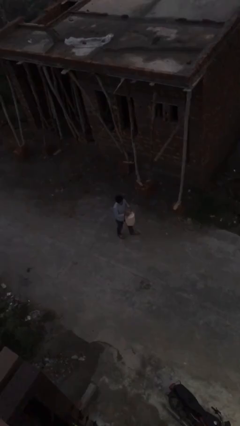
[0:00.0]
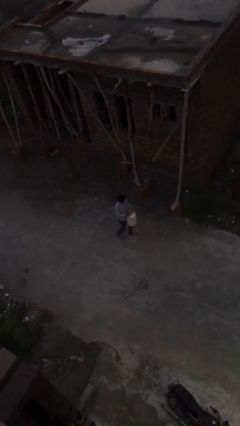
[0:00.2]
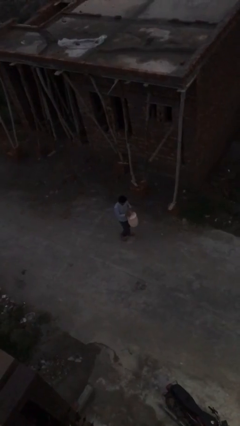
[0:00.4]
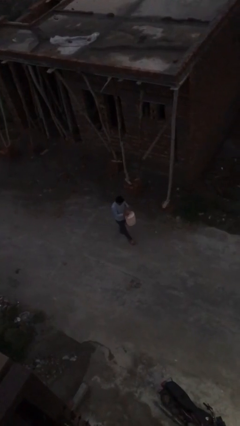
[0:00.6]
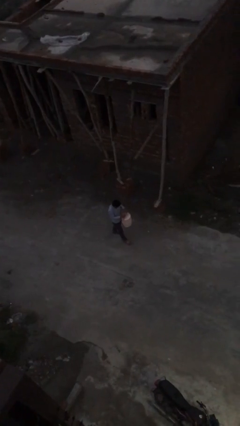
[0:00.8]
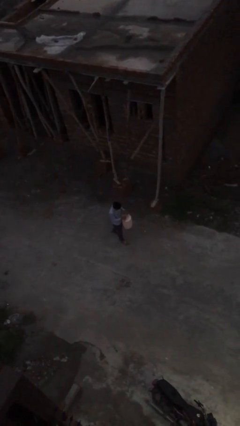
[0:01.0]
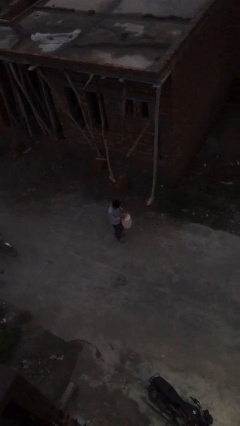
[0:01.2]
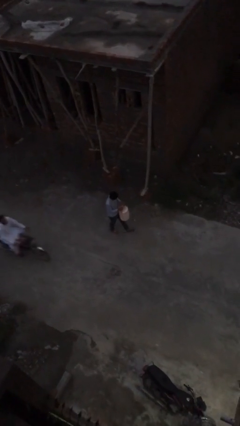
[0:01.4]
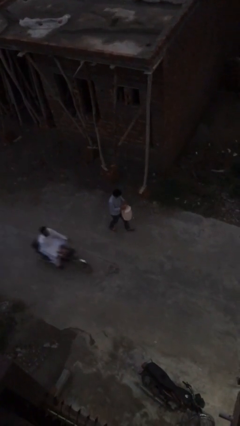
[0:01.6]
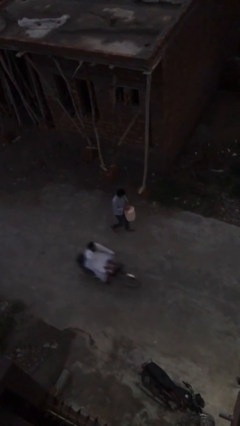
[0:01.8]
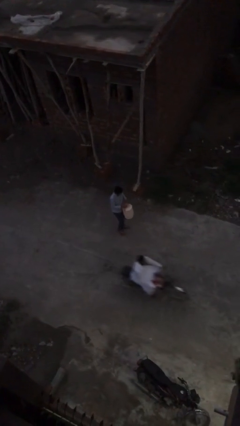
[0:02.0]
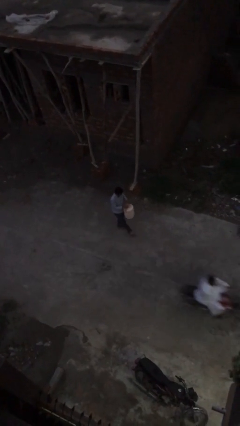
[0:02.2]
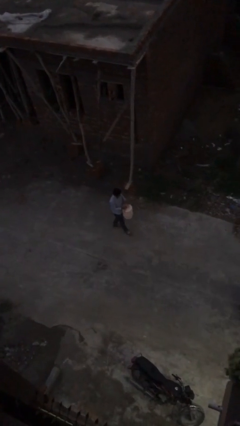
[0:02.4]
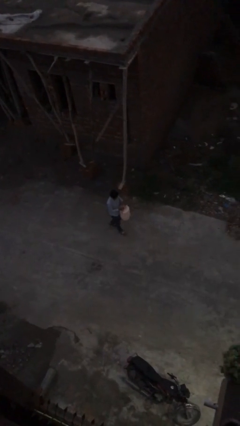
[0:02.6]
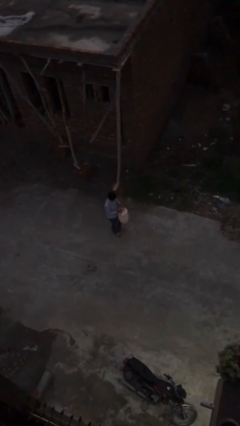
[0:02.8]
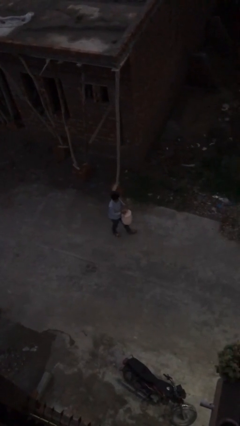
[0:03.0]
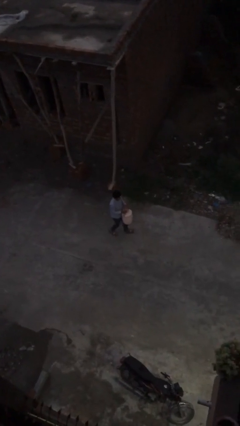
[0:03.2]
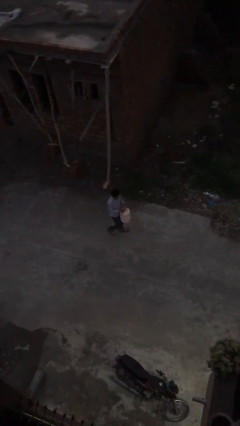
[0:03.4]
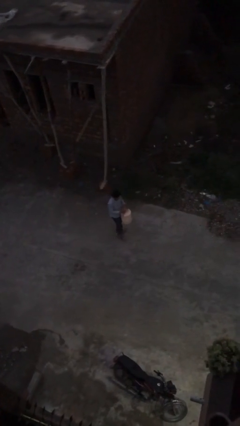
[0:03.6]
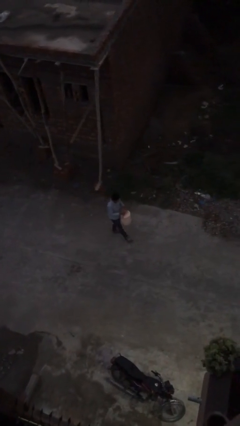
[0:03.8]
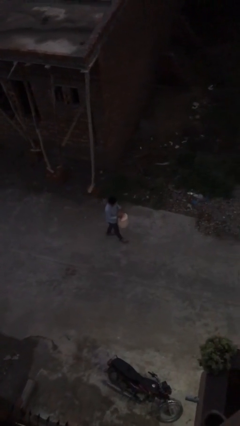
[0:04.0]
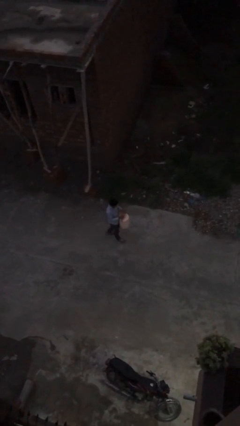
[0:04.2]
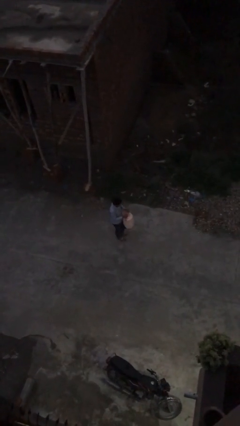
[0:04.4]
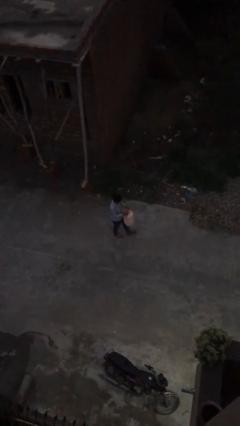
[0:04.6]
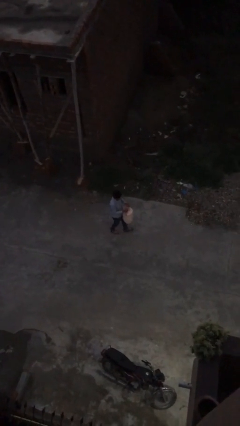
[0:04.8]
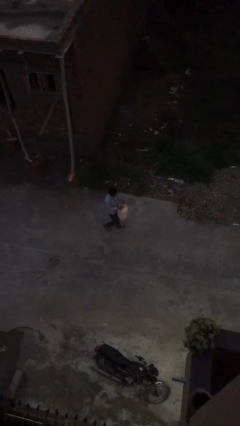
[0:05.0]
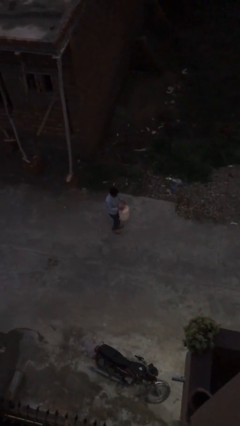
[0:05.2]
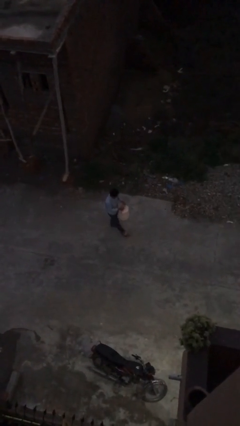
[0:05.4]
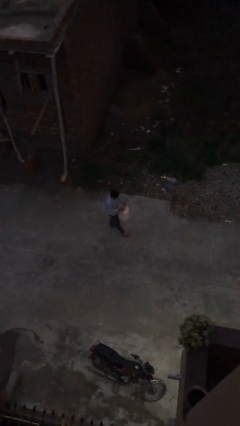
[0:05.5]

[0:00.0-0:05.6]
person carries heavy object

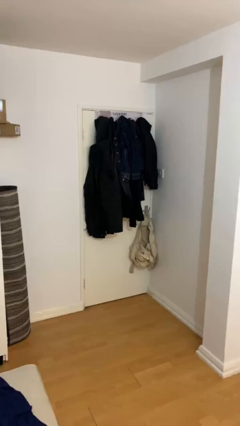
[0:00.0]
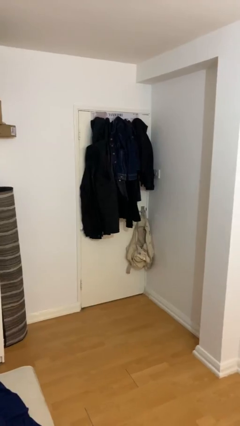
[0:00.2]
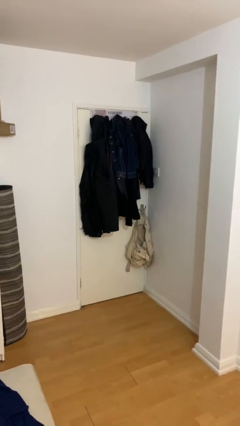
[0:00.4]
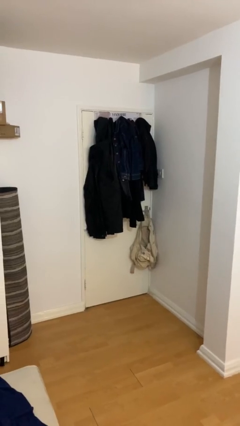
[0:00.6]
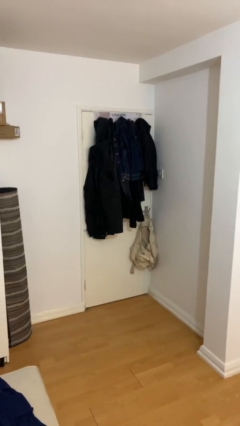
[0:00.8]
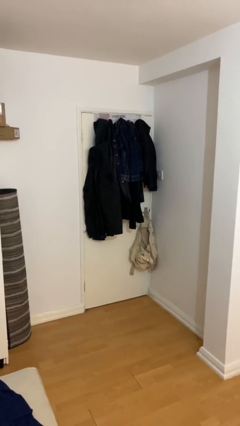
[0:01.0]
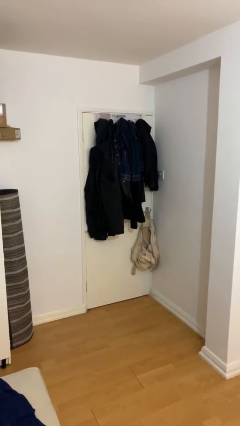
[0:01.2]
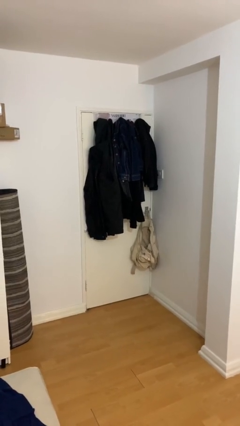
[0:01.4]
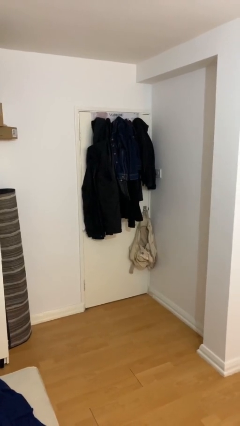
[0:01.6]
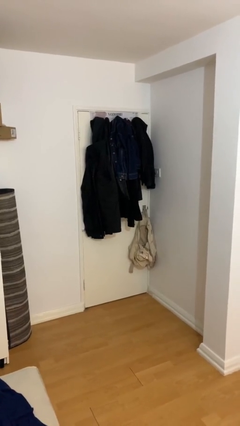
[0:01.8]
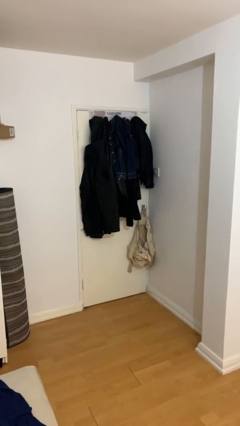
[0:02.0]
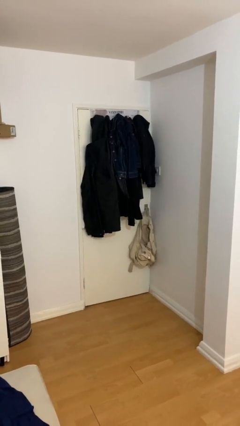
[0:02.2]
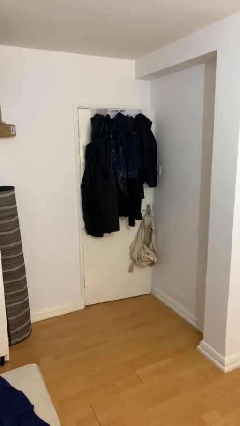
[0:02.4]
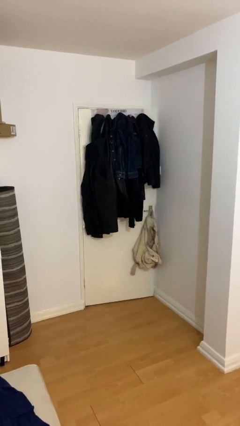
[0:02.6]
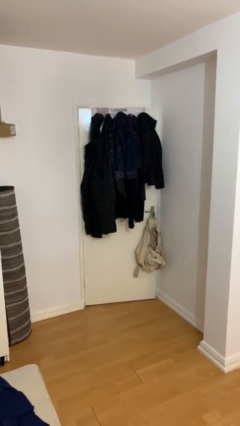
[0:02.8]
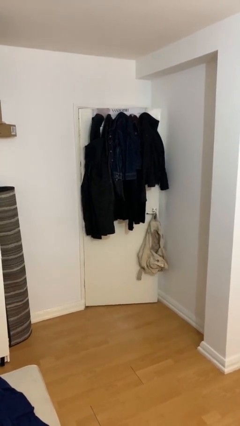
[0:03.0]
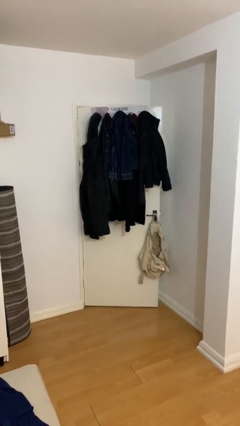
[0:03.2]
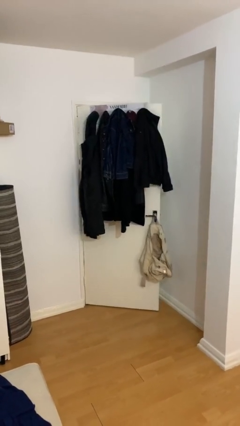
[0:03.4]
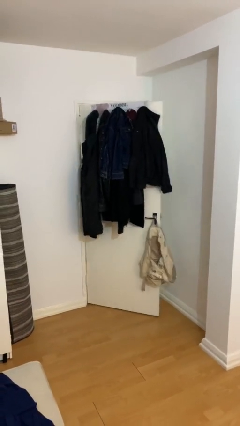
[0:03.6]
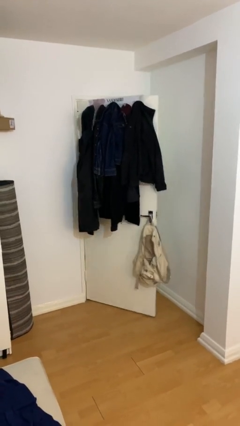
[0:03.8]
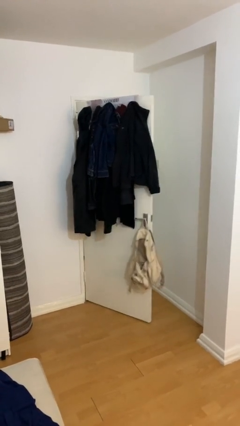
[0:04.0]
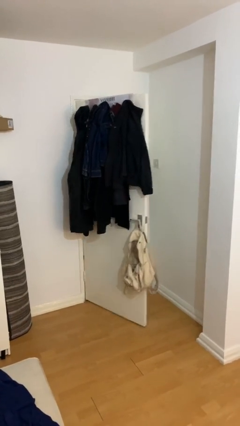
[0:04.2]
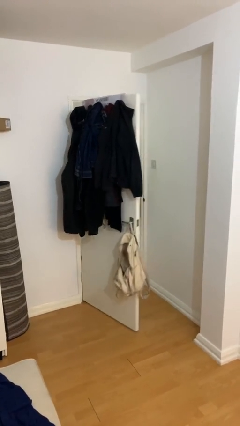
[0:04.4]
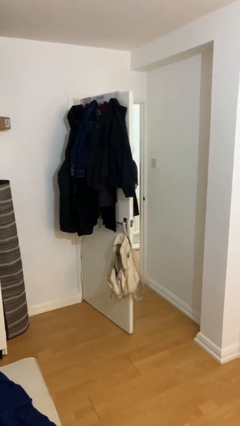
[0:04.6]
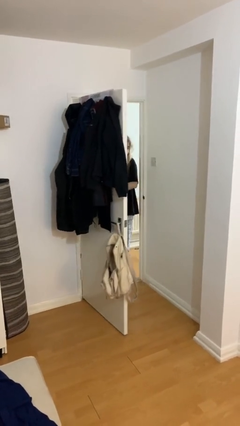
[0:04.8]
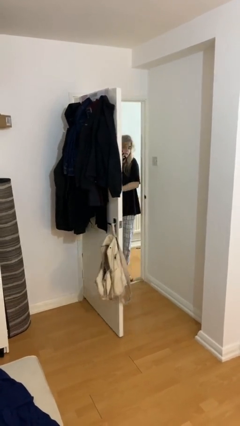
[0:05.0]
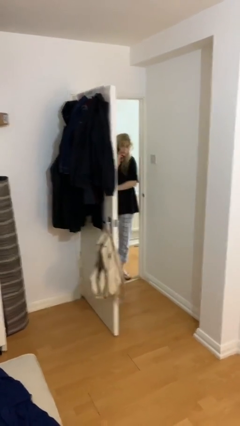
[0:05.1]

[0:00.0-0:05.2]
person opens facility door

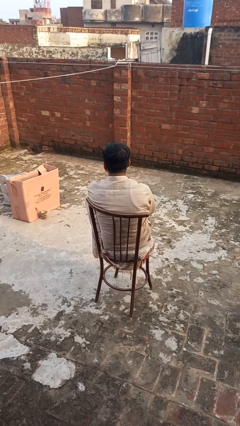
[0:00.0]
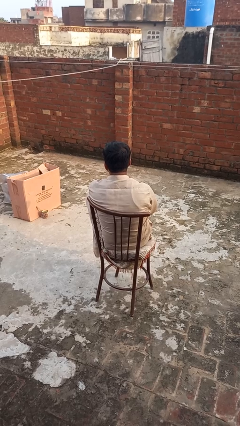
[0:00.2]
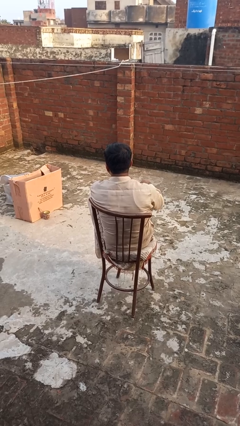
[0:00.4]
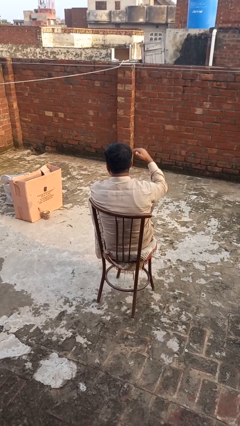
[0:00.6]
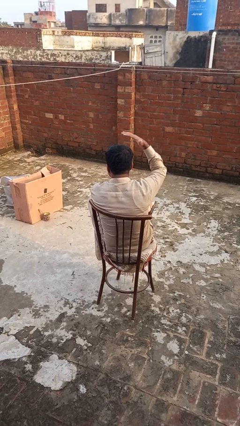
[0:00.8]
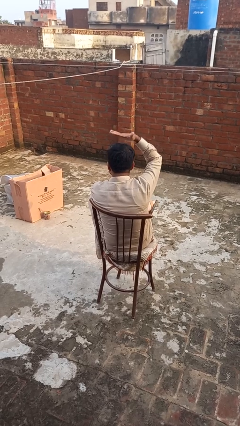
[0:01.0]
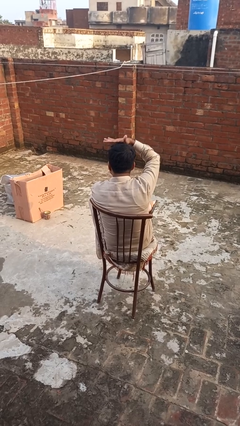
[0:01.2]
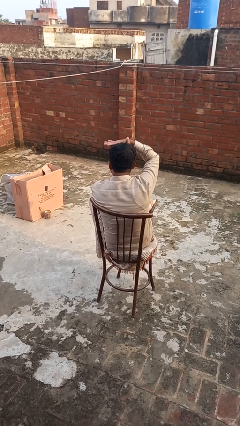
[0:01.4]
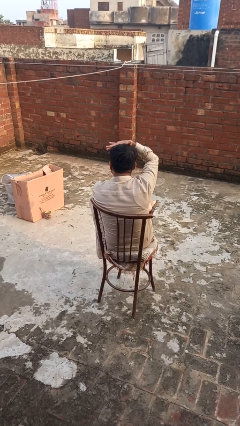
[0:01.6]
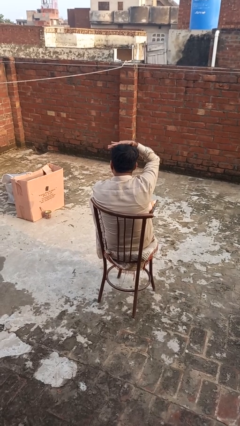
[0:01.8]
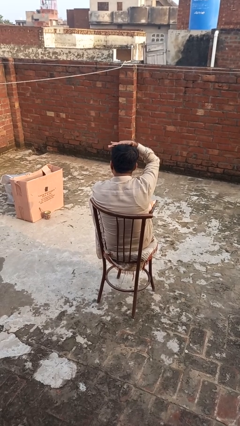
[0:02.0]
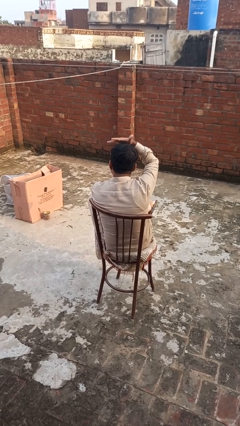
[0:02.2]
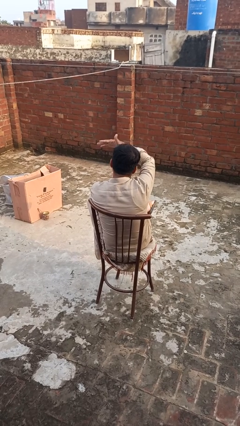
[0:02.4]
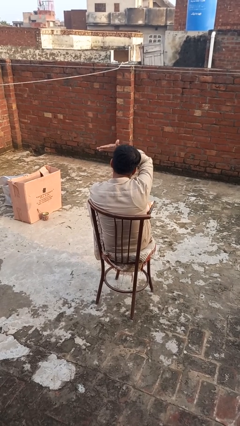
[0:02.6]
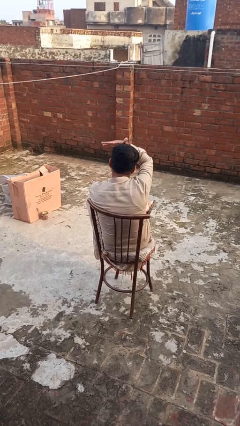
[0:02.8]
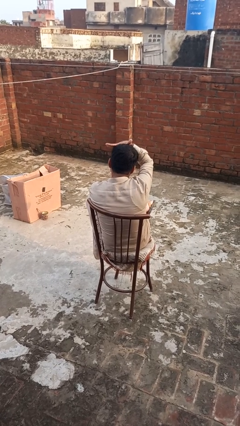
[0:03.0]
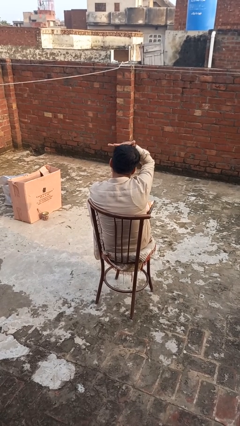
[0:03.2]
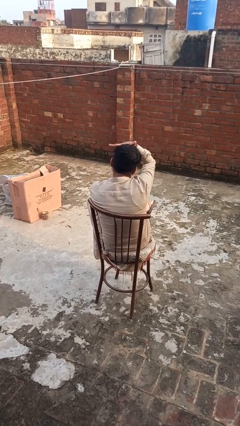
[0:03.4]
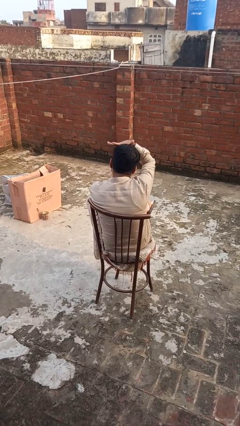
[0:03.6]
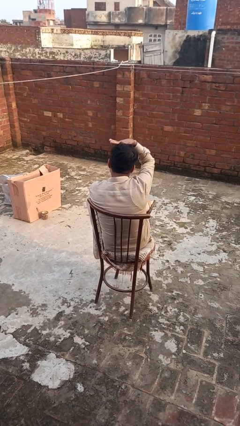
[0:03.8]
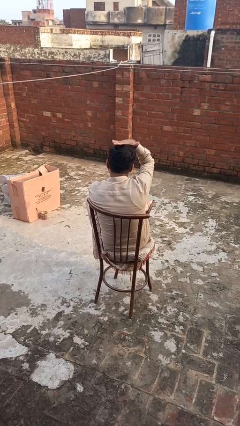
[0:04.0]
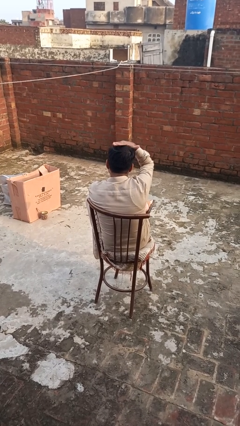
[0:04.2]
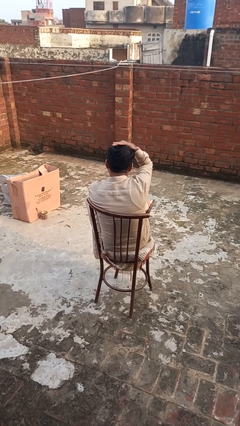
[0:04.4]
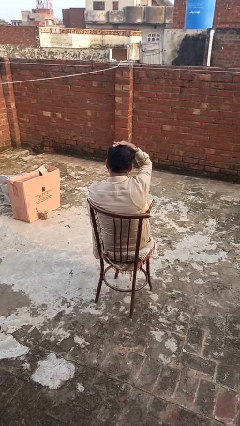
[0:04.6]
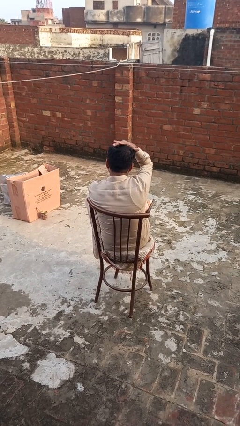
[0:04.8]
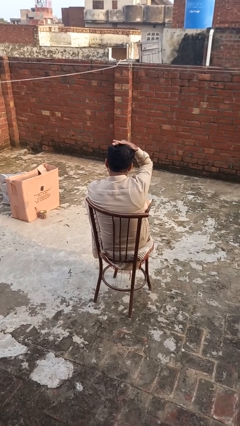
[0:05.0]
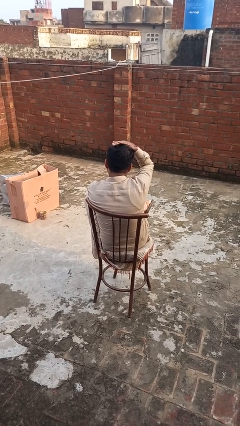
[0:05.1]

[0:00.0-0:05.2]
person pats head

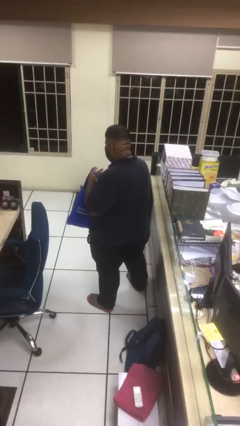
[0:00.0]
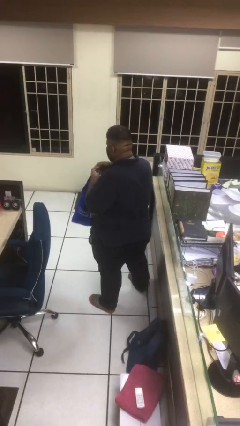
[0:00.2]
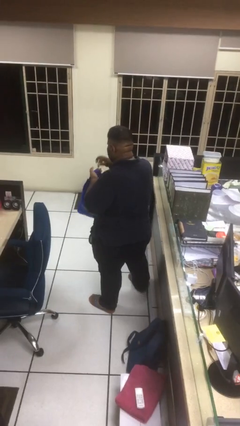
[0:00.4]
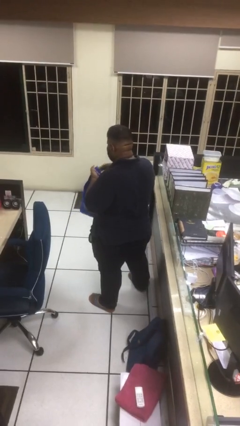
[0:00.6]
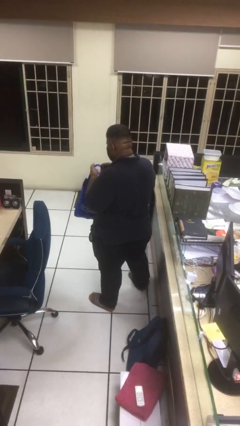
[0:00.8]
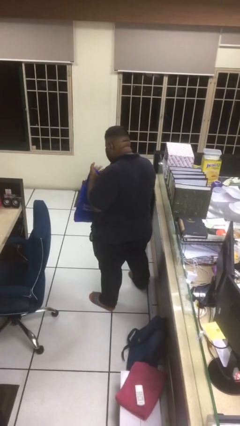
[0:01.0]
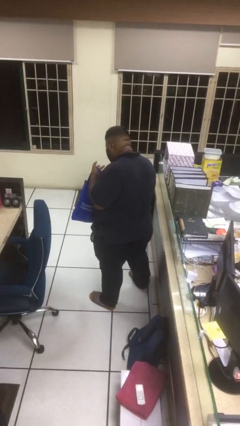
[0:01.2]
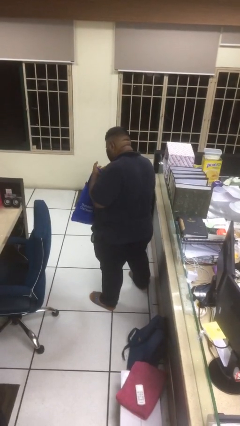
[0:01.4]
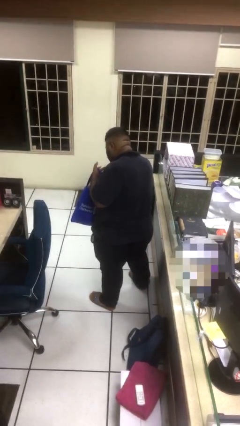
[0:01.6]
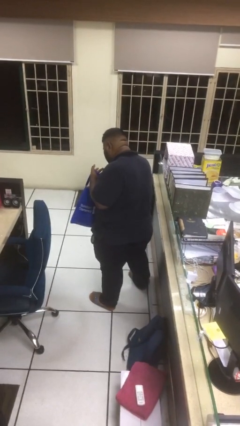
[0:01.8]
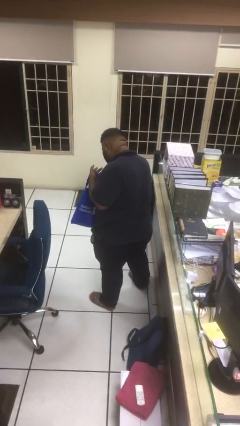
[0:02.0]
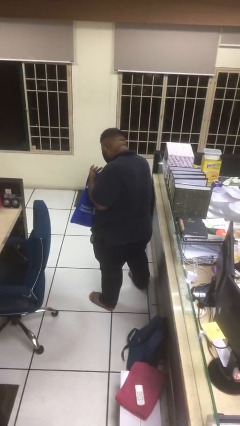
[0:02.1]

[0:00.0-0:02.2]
person searches in bag
